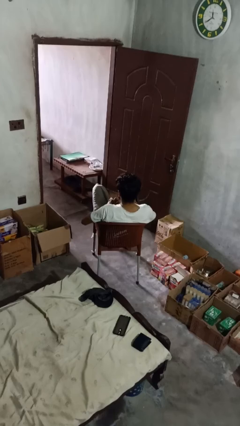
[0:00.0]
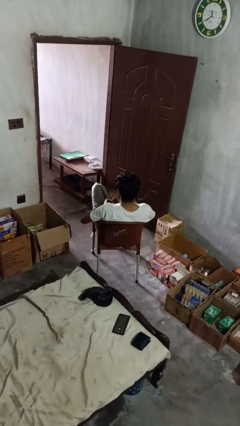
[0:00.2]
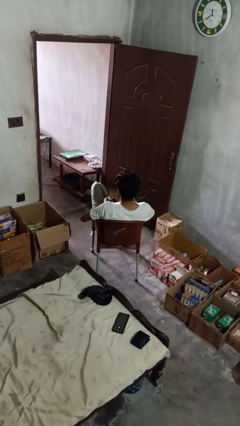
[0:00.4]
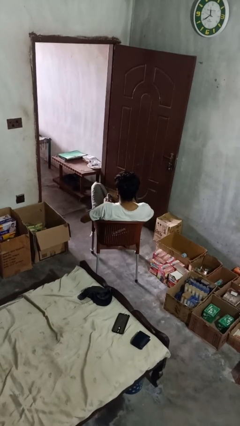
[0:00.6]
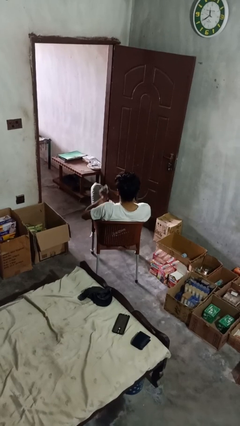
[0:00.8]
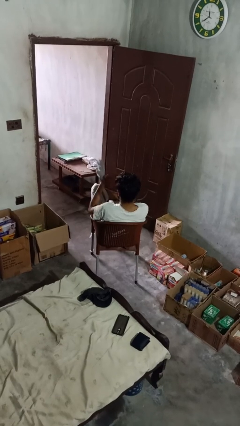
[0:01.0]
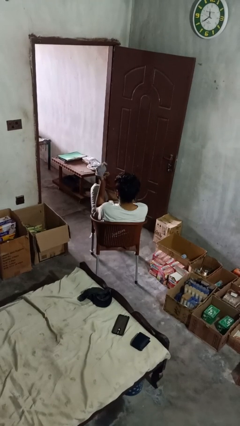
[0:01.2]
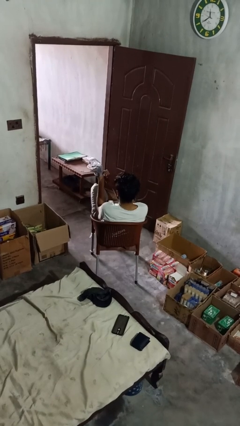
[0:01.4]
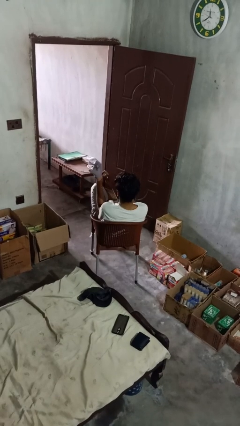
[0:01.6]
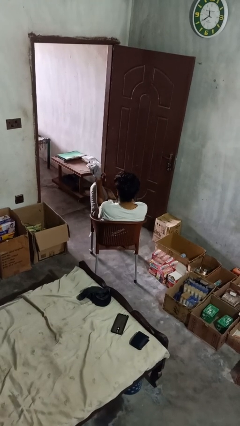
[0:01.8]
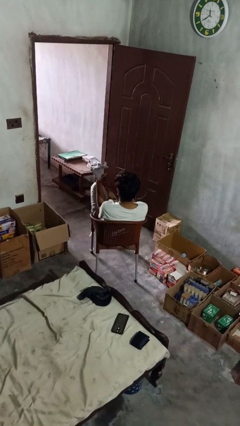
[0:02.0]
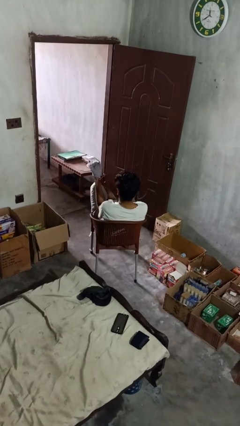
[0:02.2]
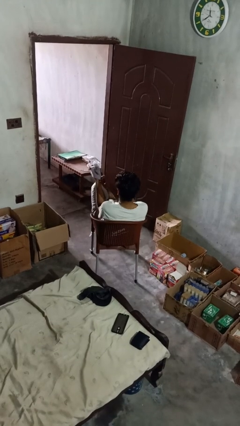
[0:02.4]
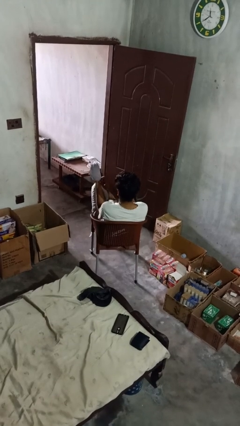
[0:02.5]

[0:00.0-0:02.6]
person puts on gloves

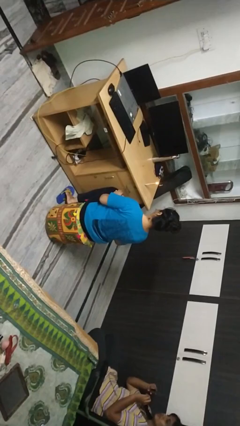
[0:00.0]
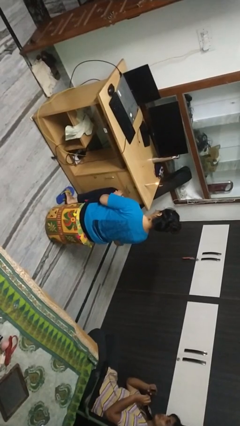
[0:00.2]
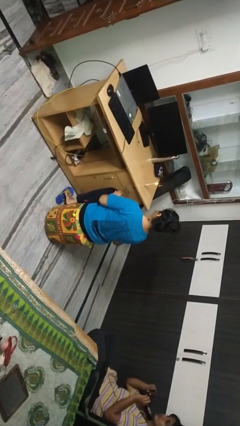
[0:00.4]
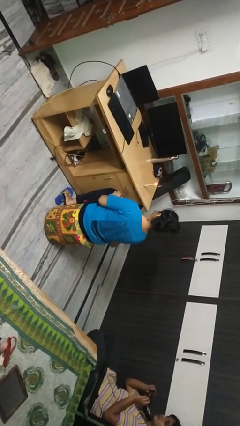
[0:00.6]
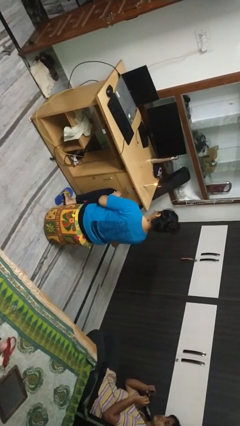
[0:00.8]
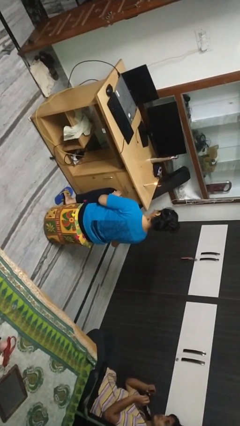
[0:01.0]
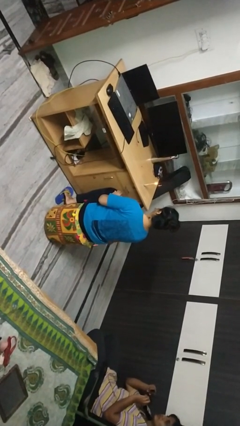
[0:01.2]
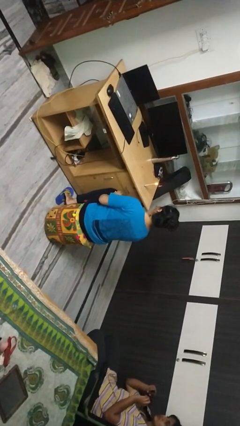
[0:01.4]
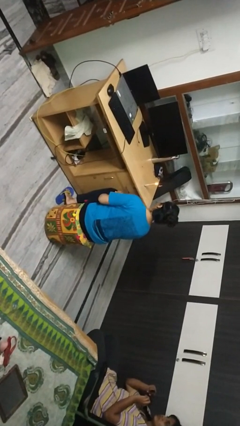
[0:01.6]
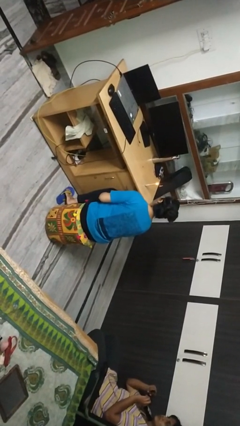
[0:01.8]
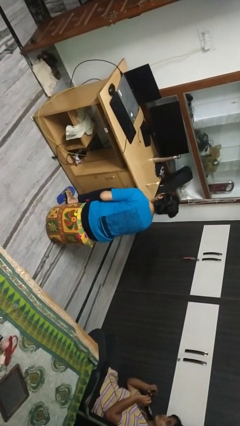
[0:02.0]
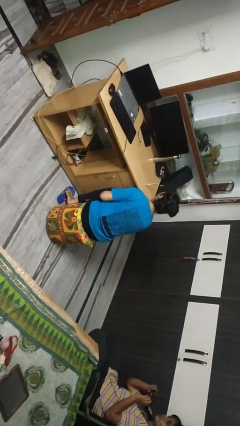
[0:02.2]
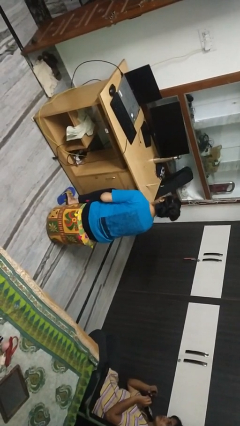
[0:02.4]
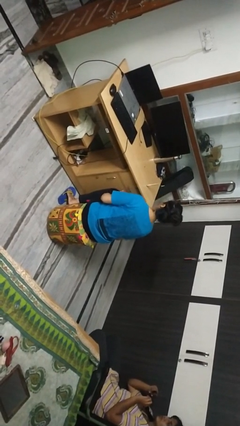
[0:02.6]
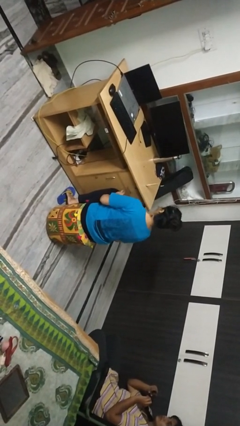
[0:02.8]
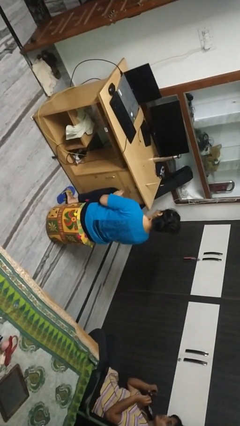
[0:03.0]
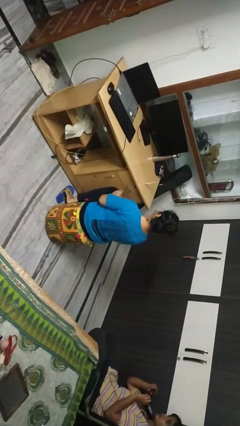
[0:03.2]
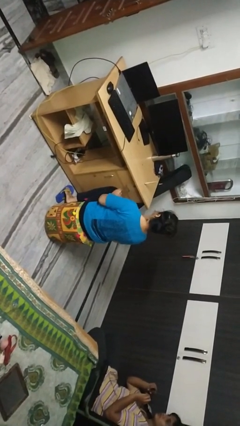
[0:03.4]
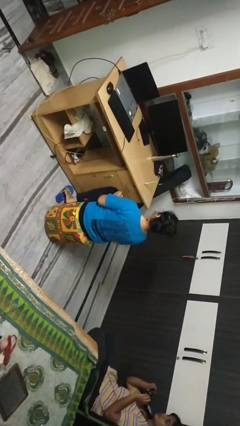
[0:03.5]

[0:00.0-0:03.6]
person extinguishes candle

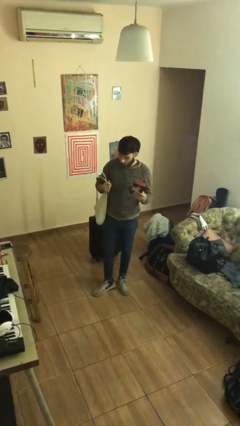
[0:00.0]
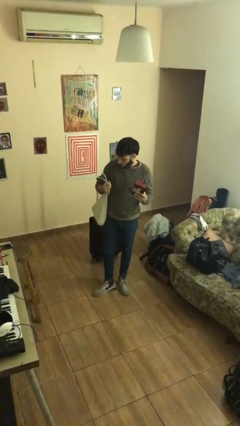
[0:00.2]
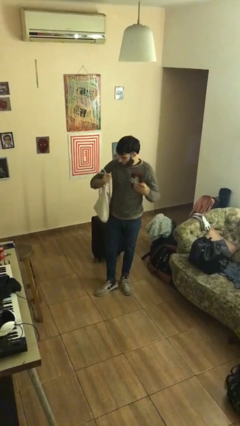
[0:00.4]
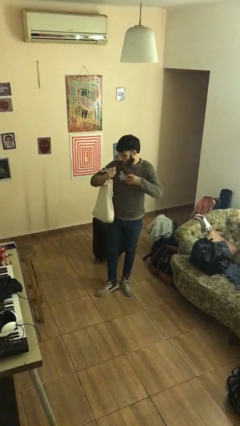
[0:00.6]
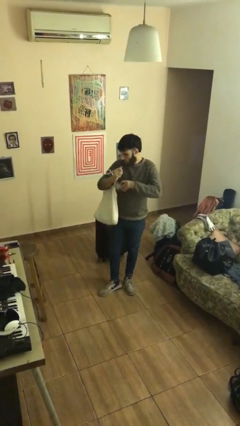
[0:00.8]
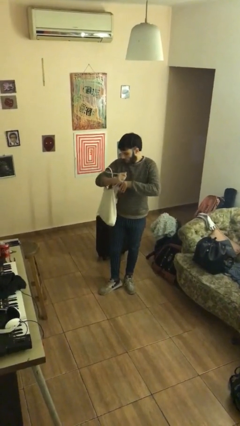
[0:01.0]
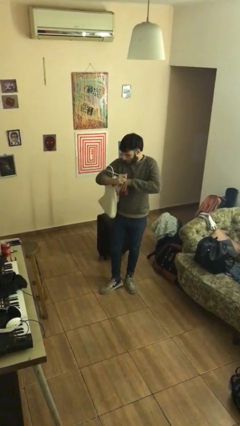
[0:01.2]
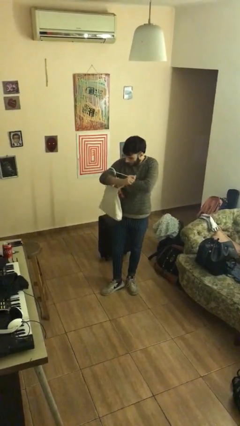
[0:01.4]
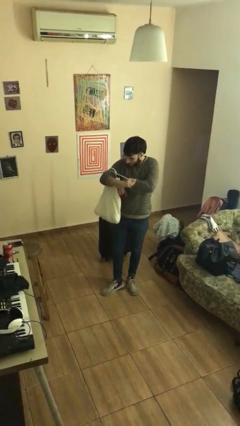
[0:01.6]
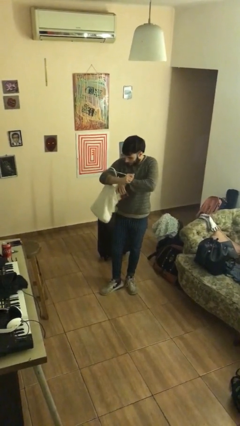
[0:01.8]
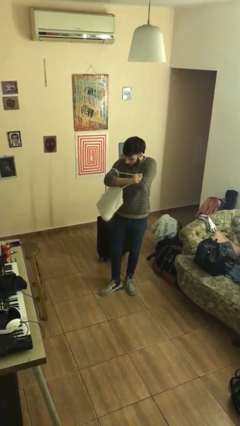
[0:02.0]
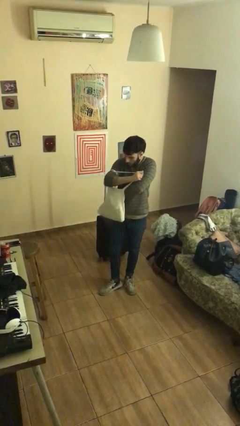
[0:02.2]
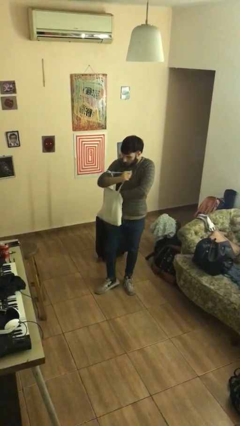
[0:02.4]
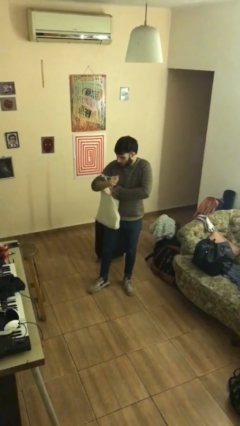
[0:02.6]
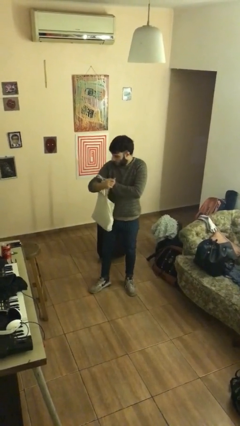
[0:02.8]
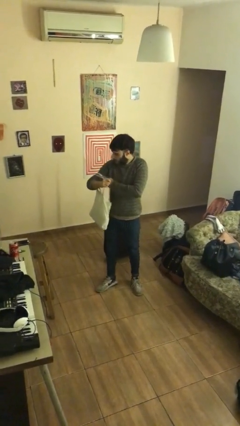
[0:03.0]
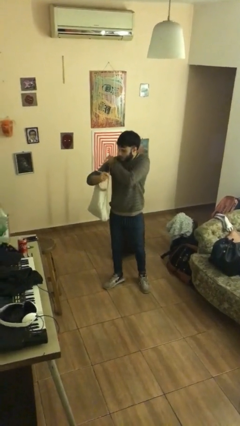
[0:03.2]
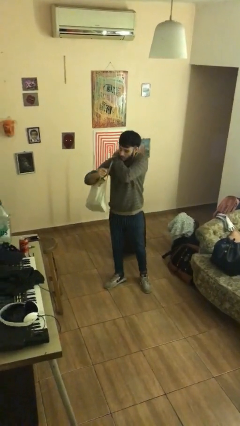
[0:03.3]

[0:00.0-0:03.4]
person puts object into purse

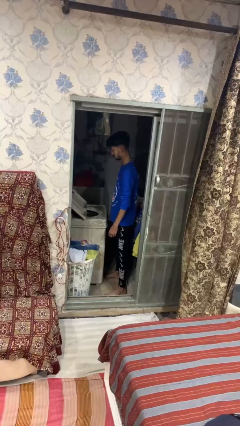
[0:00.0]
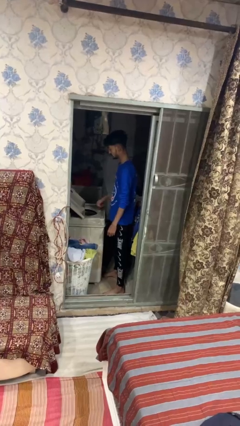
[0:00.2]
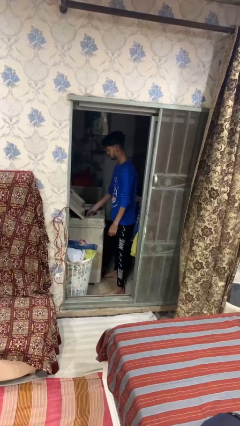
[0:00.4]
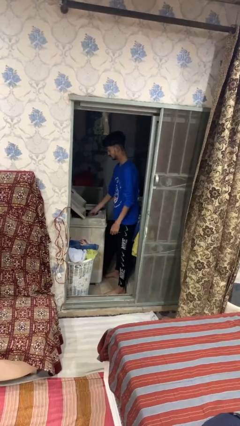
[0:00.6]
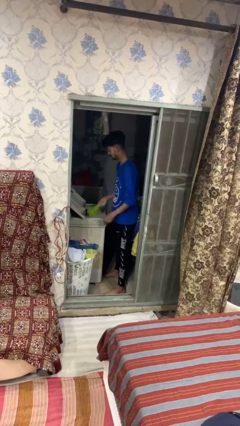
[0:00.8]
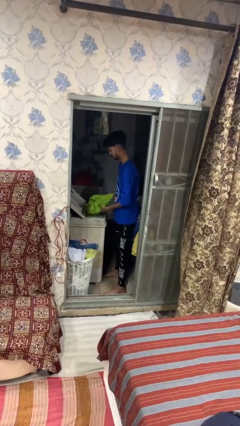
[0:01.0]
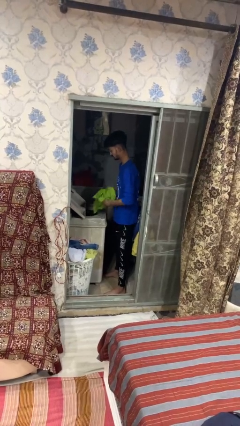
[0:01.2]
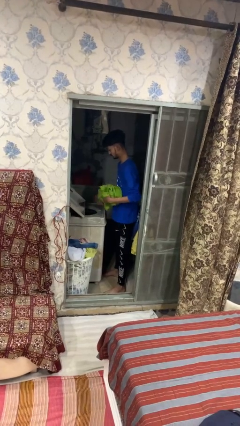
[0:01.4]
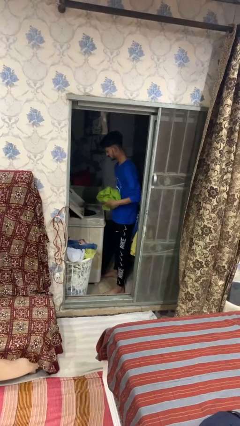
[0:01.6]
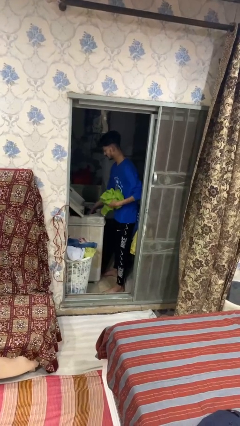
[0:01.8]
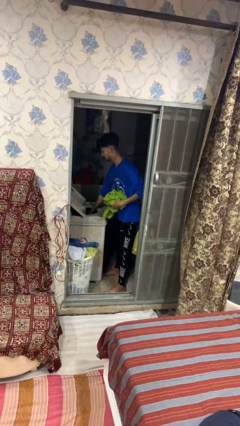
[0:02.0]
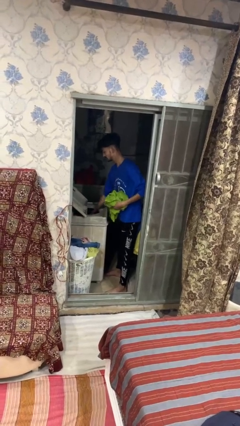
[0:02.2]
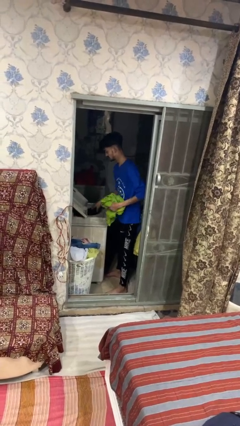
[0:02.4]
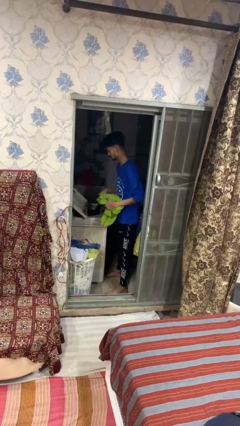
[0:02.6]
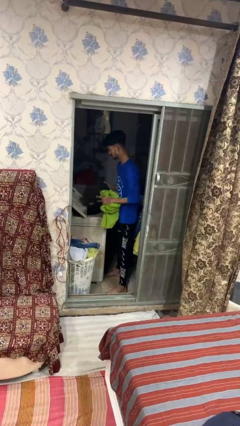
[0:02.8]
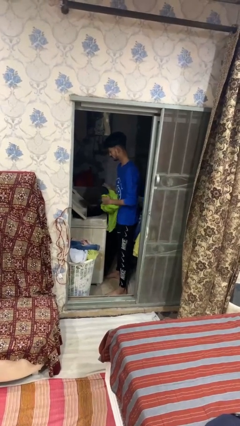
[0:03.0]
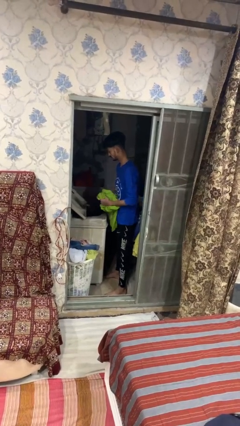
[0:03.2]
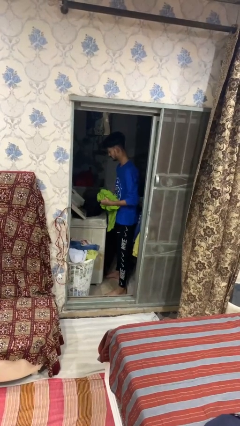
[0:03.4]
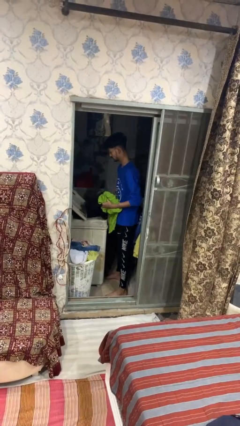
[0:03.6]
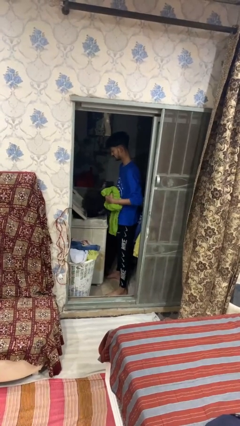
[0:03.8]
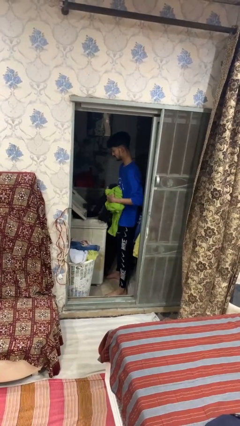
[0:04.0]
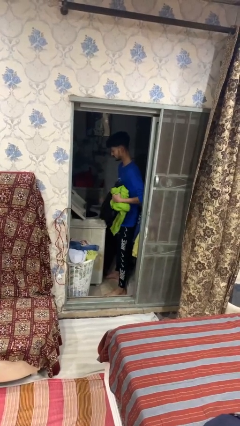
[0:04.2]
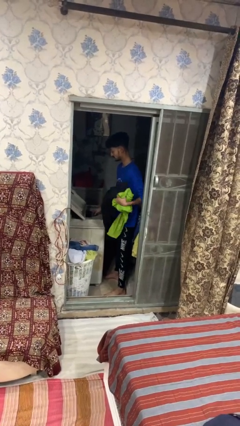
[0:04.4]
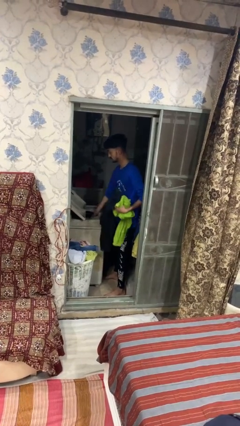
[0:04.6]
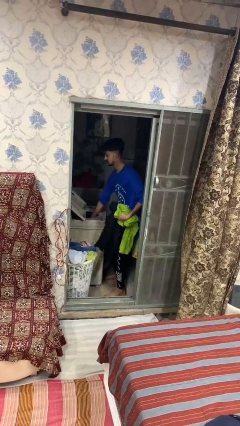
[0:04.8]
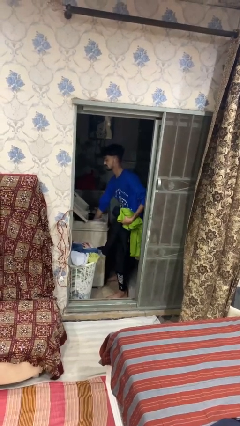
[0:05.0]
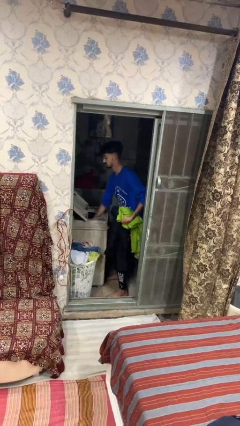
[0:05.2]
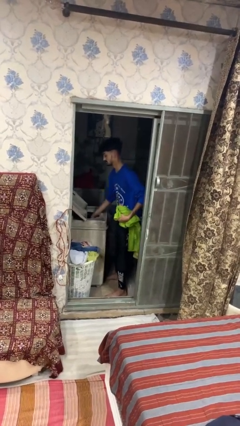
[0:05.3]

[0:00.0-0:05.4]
person unloads clotheswasher

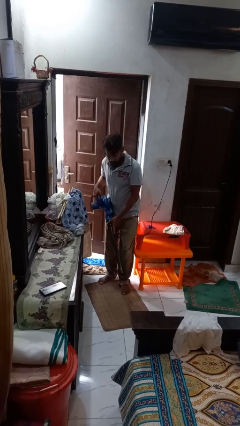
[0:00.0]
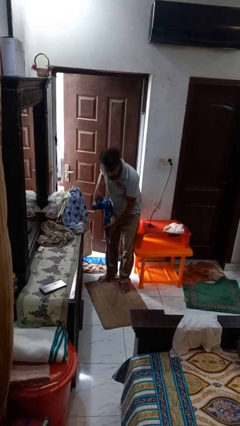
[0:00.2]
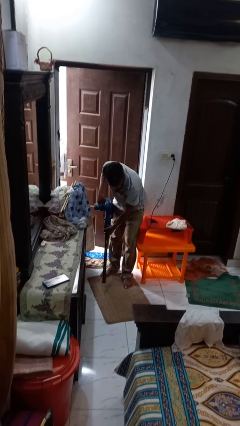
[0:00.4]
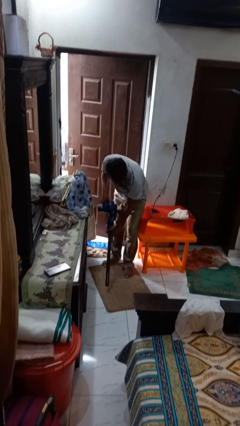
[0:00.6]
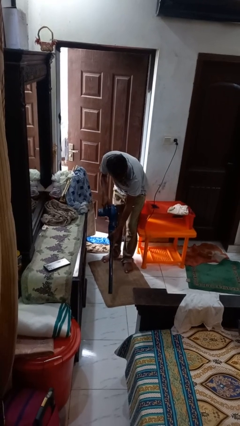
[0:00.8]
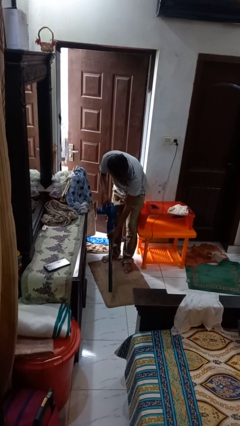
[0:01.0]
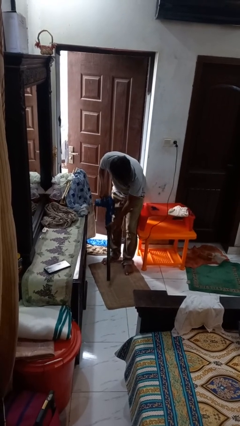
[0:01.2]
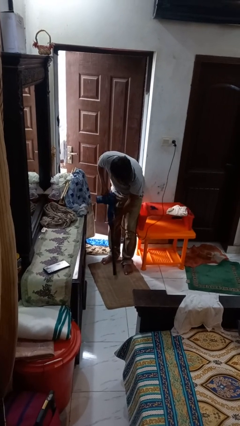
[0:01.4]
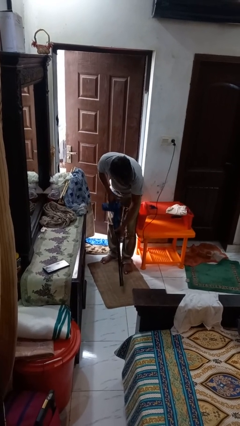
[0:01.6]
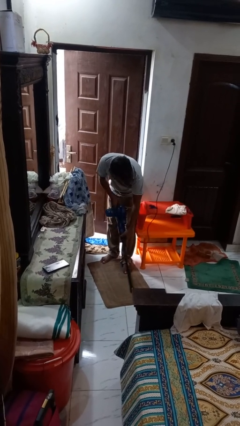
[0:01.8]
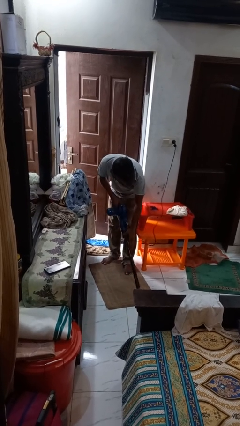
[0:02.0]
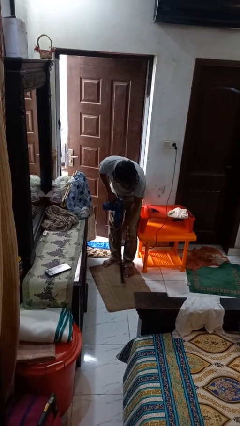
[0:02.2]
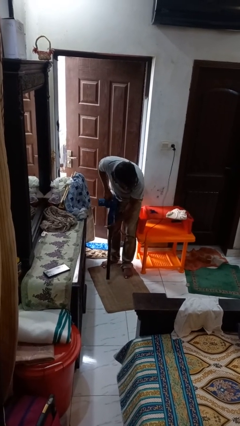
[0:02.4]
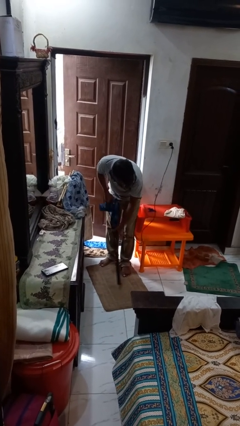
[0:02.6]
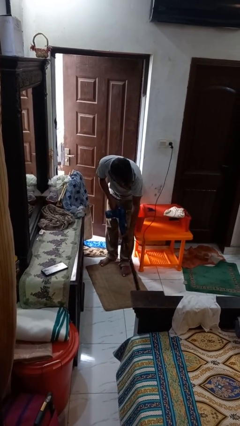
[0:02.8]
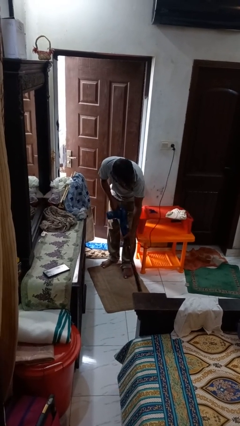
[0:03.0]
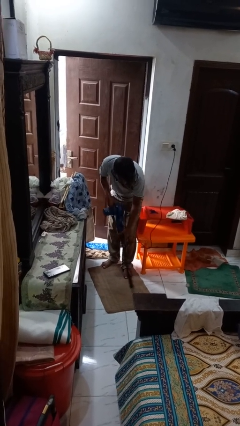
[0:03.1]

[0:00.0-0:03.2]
person vacuums carpet
